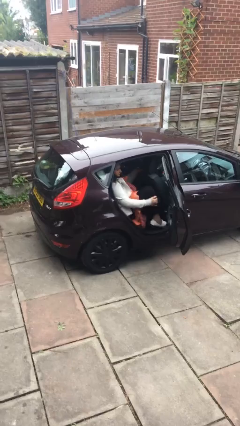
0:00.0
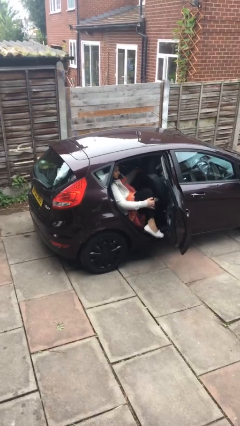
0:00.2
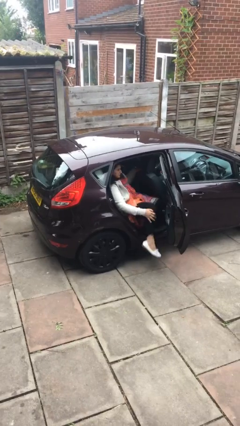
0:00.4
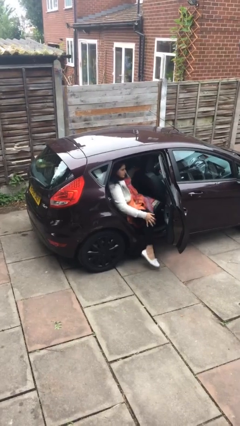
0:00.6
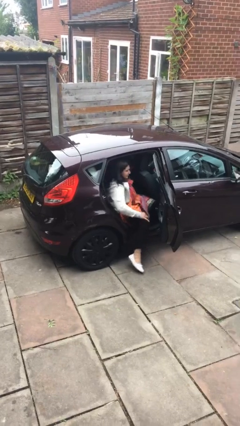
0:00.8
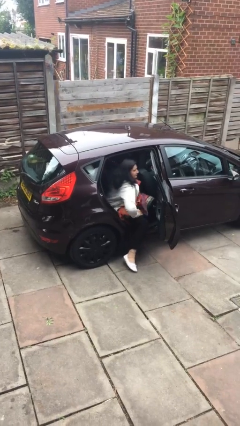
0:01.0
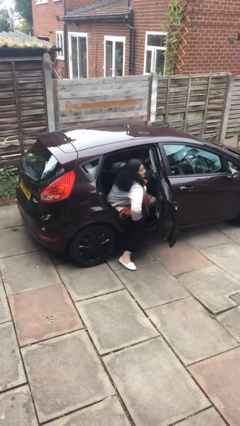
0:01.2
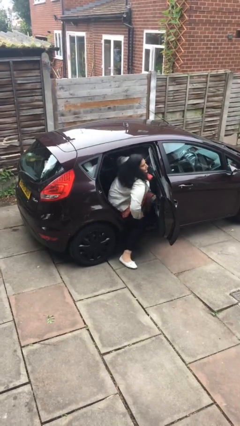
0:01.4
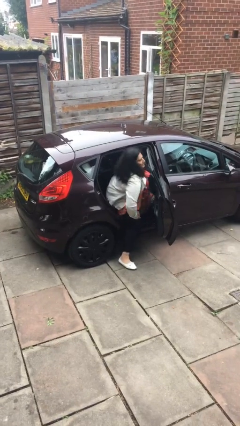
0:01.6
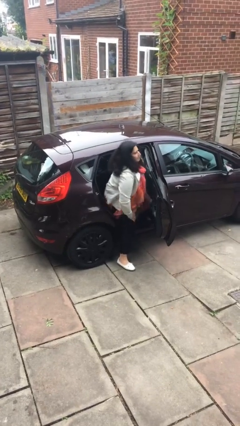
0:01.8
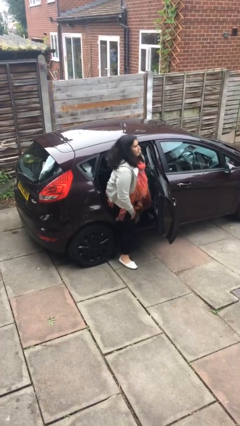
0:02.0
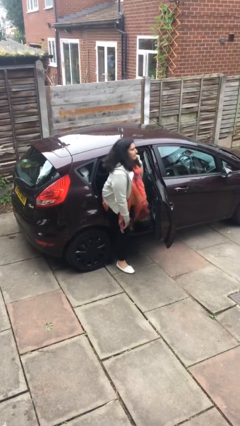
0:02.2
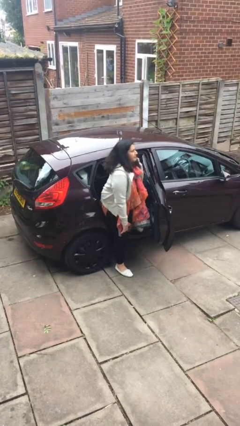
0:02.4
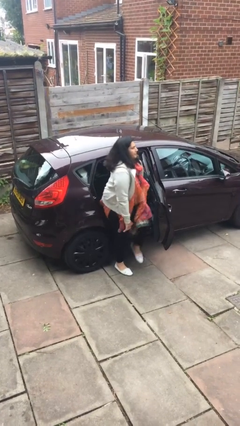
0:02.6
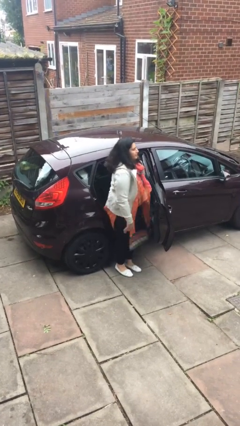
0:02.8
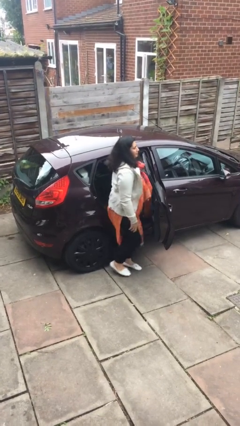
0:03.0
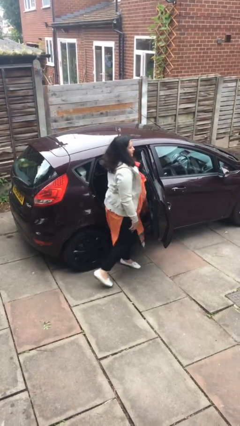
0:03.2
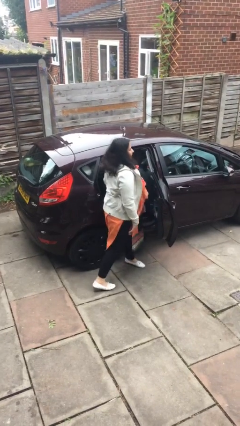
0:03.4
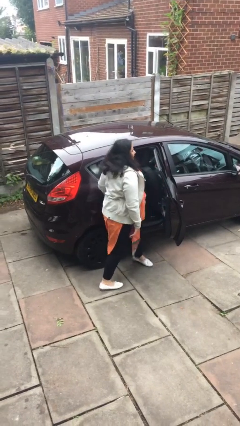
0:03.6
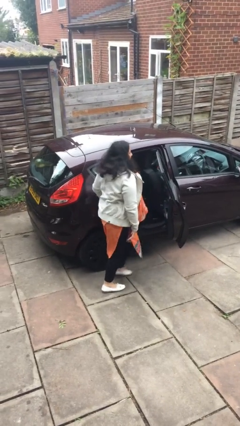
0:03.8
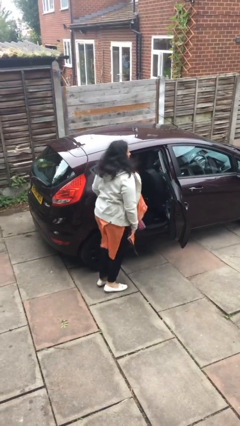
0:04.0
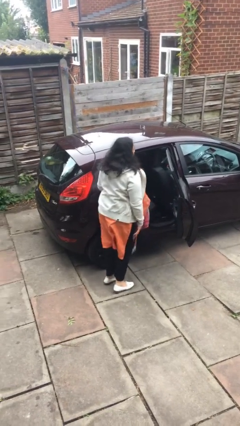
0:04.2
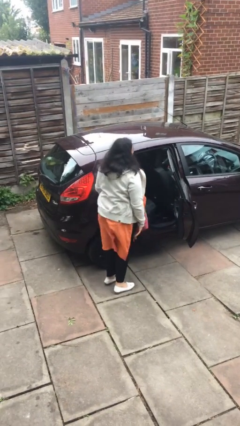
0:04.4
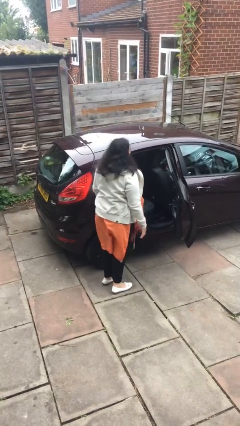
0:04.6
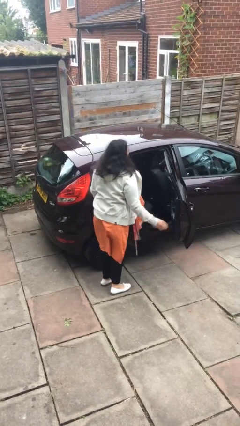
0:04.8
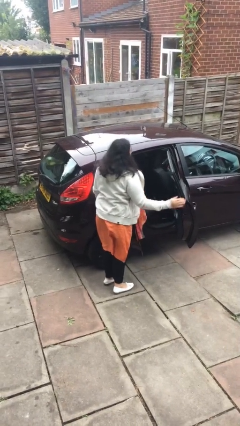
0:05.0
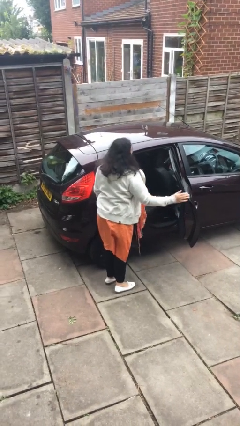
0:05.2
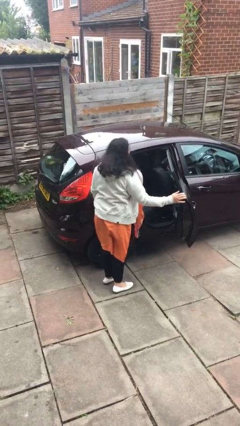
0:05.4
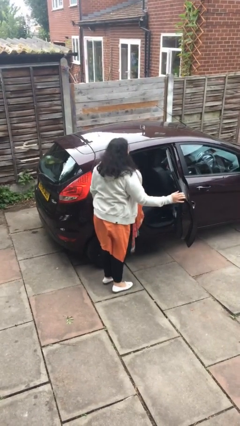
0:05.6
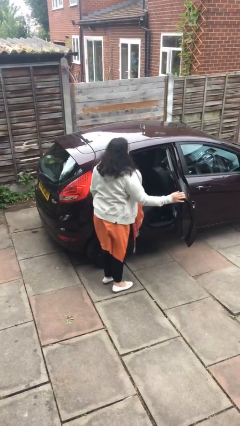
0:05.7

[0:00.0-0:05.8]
person exits car

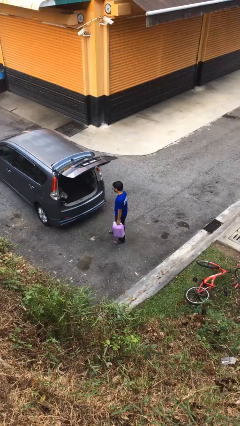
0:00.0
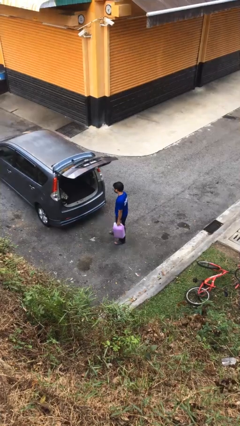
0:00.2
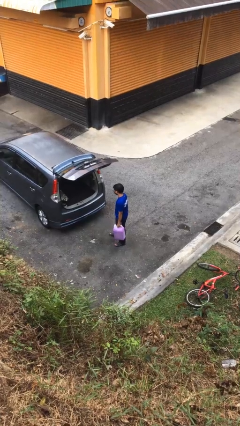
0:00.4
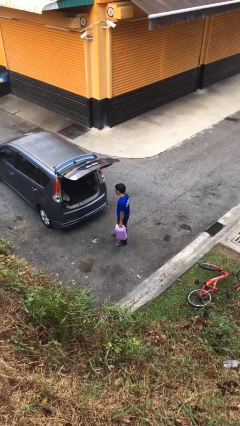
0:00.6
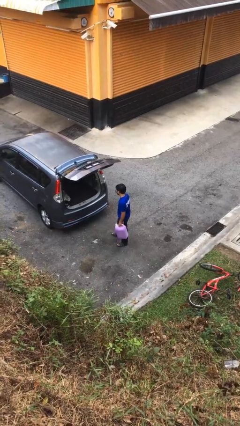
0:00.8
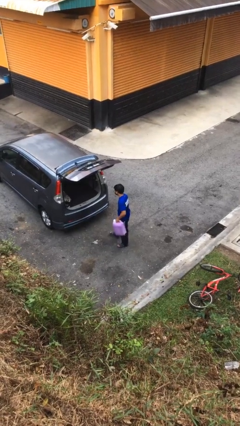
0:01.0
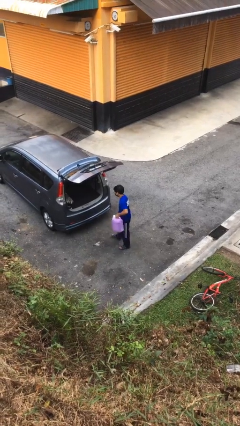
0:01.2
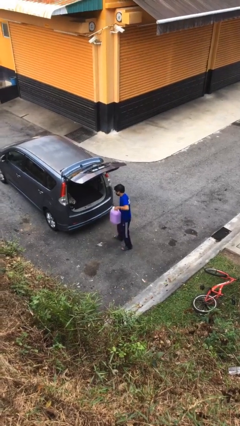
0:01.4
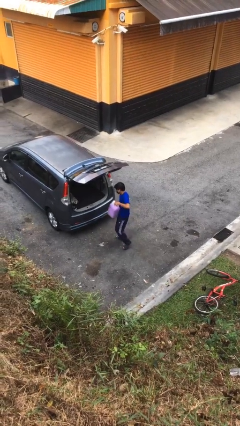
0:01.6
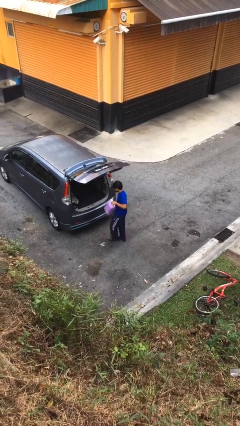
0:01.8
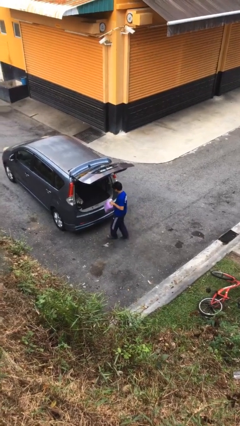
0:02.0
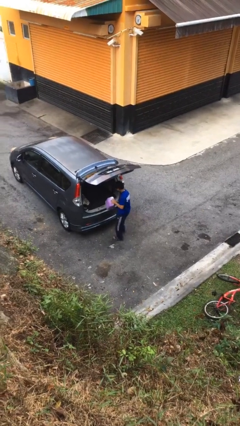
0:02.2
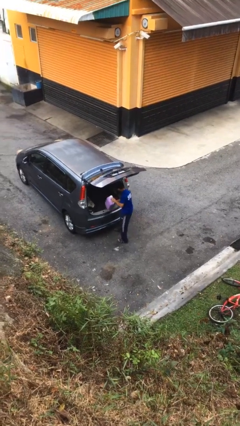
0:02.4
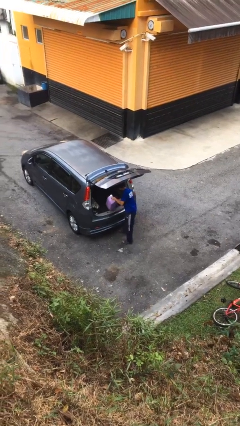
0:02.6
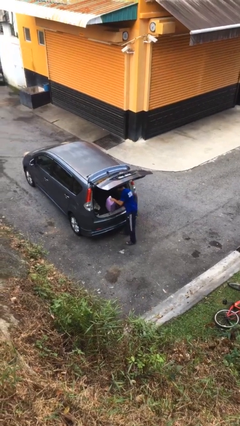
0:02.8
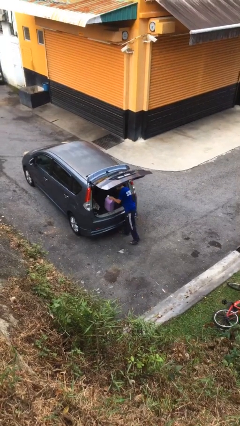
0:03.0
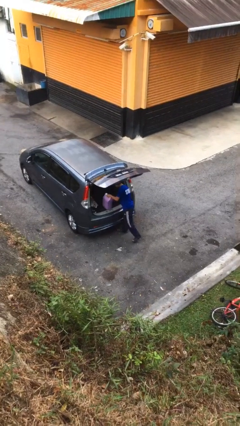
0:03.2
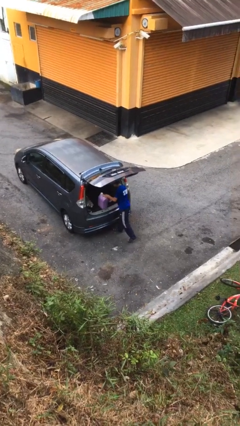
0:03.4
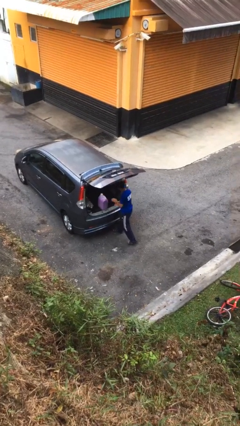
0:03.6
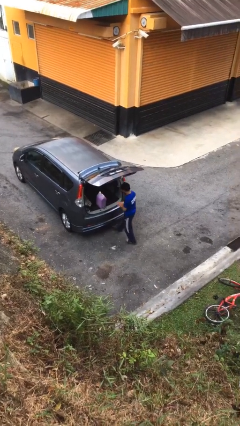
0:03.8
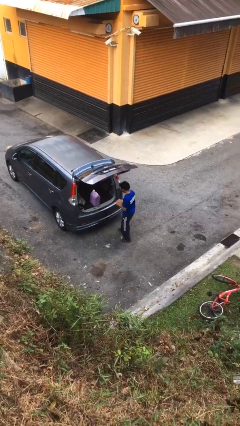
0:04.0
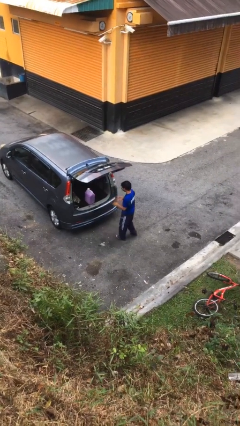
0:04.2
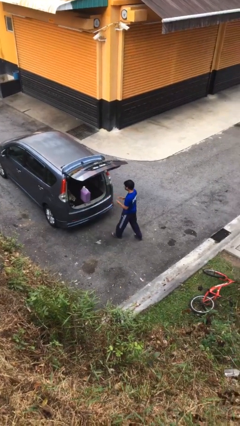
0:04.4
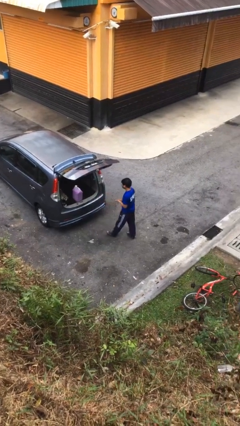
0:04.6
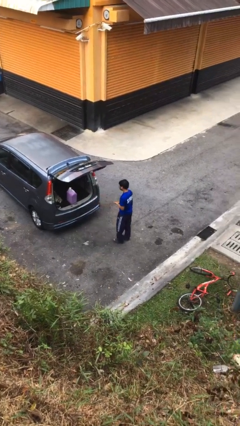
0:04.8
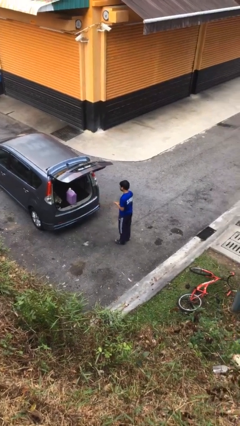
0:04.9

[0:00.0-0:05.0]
person loads car

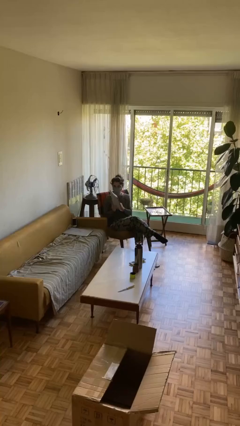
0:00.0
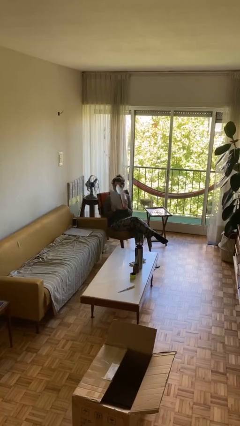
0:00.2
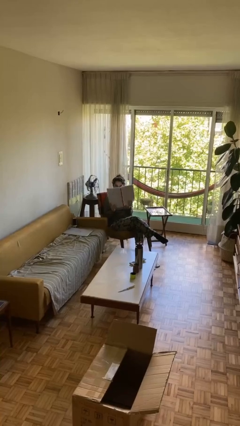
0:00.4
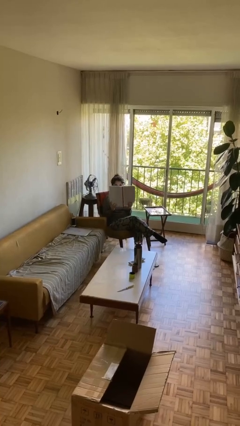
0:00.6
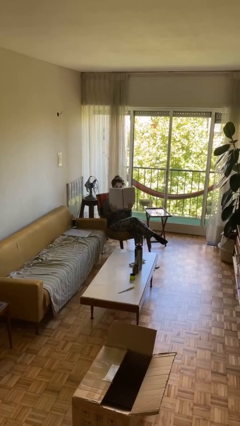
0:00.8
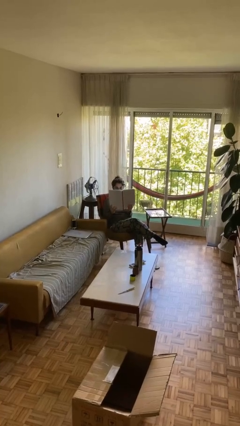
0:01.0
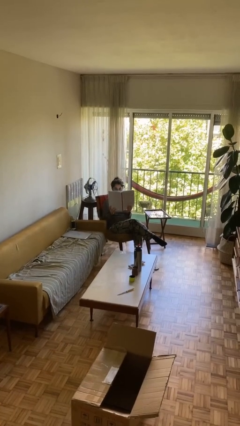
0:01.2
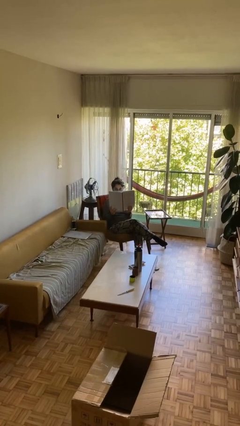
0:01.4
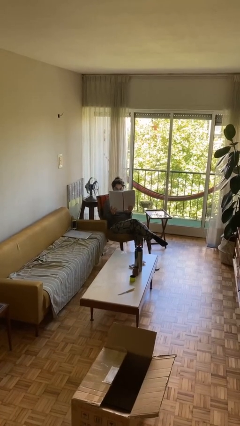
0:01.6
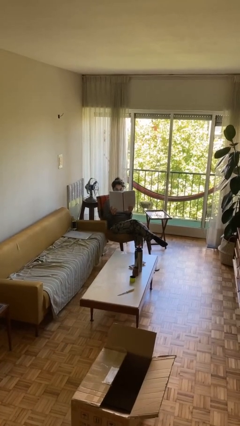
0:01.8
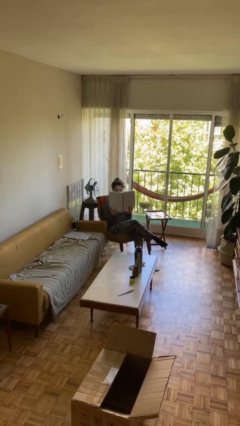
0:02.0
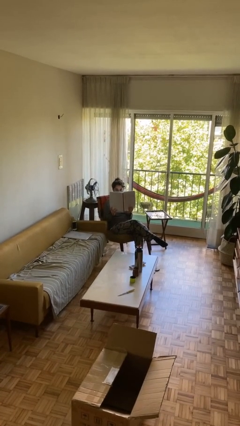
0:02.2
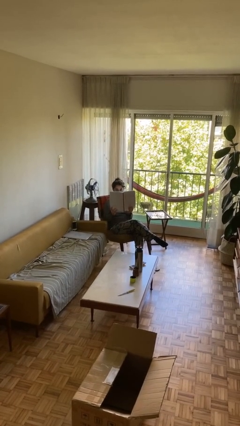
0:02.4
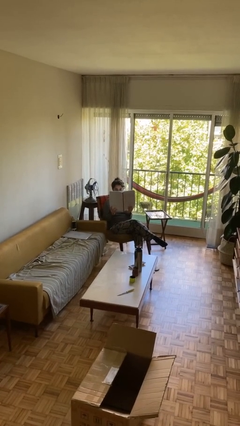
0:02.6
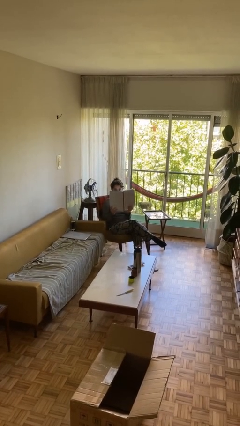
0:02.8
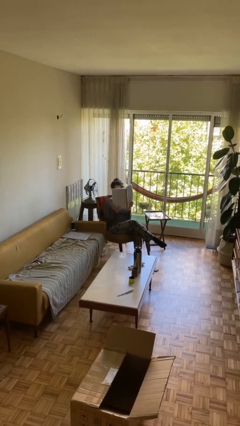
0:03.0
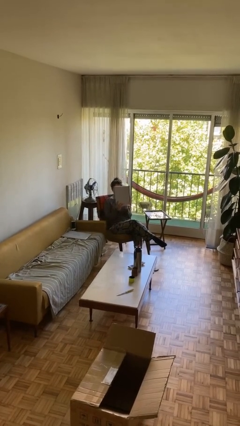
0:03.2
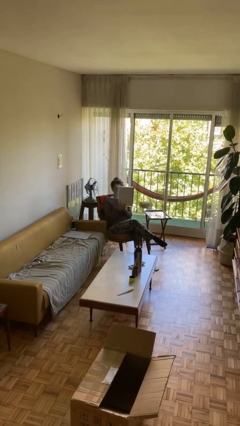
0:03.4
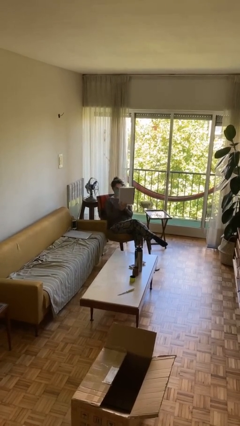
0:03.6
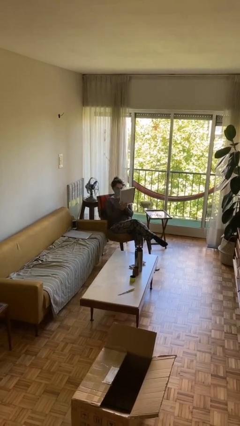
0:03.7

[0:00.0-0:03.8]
person reads document

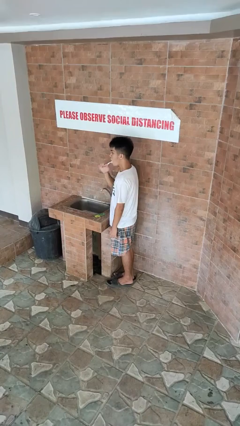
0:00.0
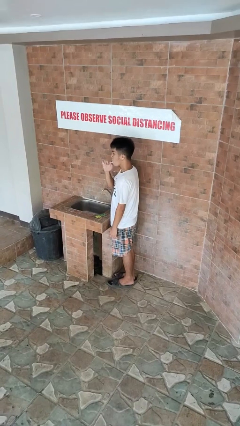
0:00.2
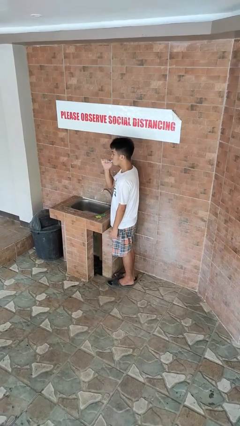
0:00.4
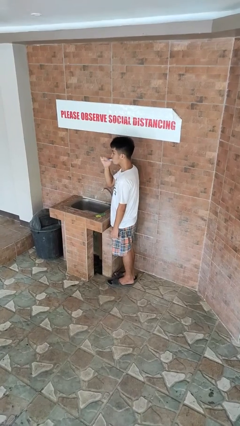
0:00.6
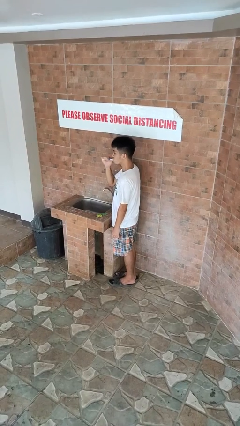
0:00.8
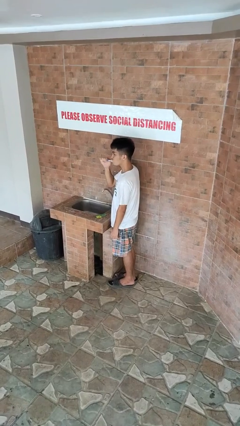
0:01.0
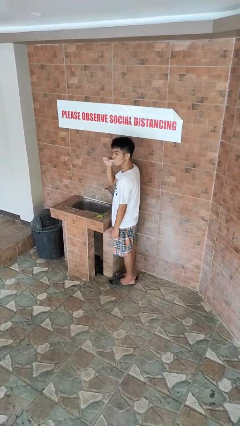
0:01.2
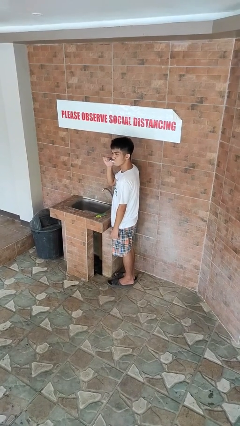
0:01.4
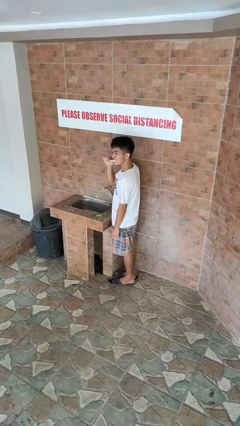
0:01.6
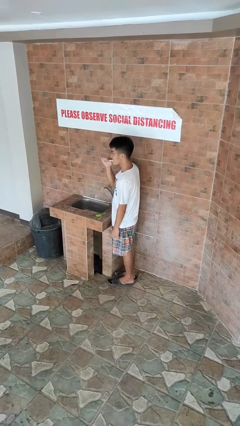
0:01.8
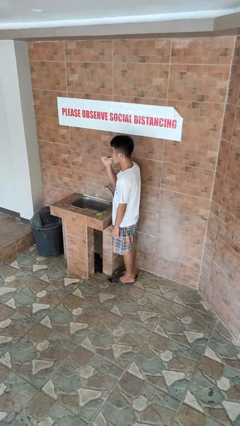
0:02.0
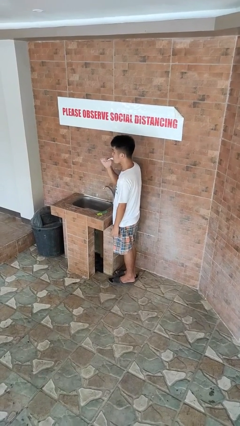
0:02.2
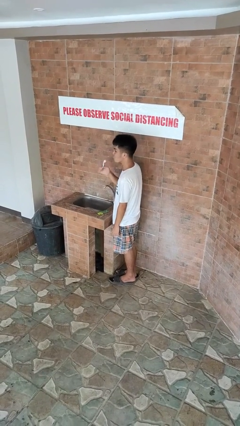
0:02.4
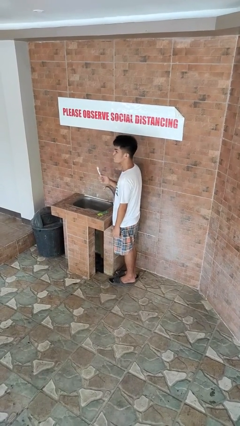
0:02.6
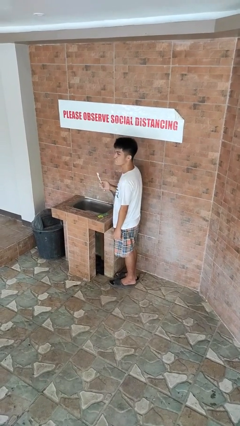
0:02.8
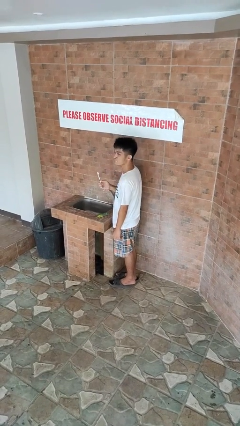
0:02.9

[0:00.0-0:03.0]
person brushes teeth
